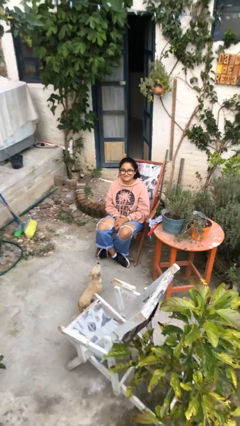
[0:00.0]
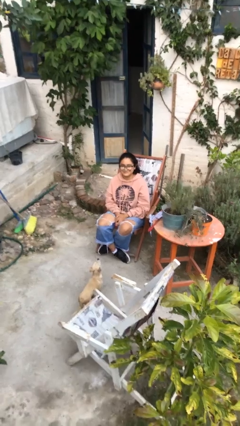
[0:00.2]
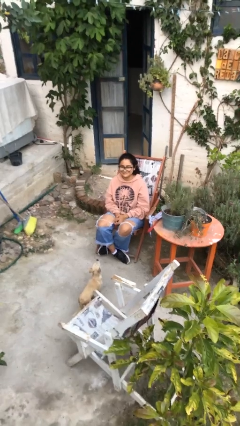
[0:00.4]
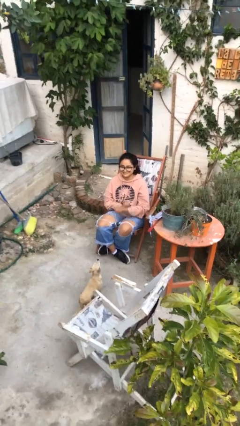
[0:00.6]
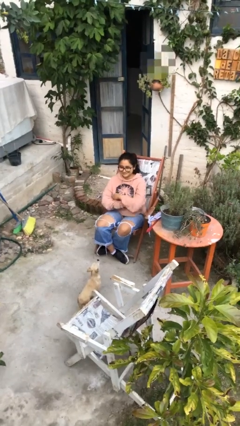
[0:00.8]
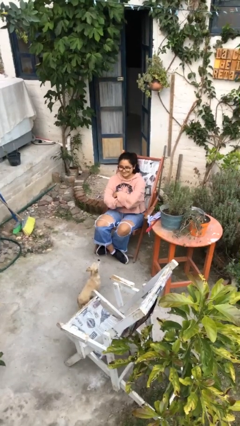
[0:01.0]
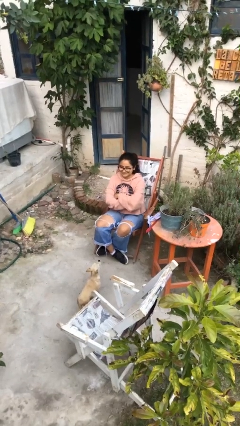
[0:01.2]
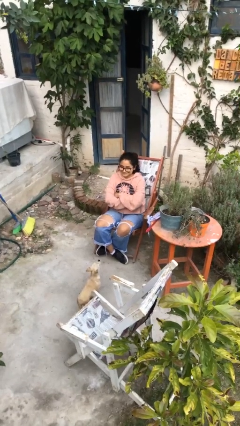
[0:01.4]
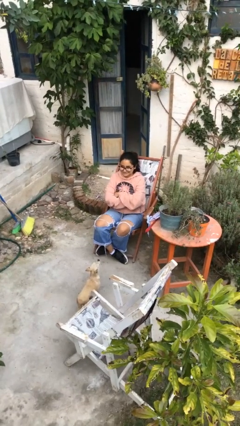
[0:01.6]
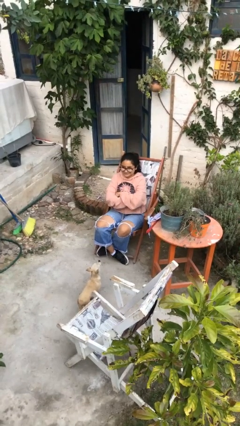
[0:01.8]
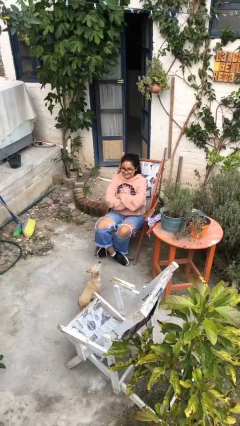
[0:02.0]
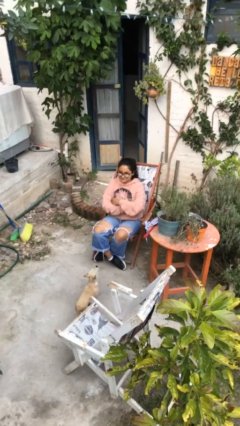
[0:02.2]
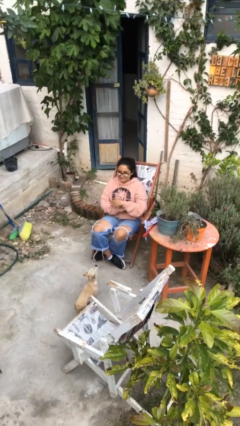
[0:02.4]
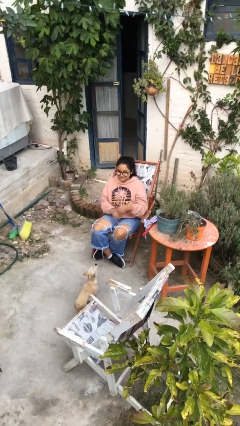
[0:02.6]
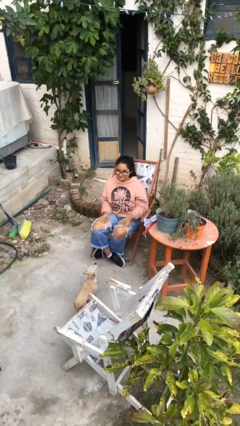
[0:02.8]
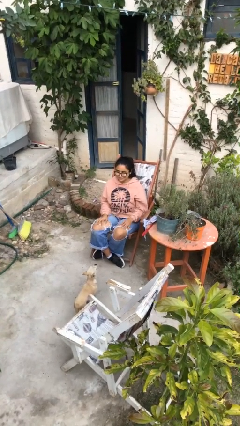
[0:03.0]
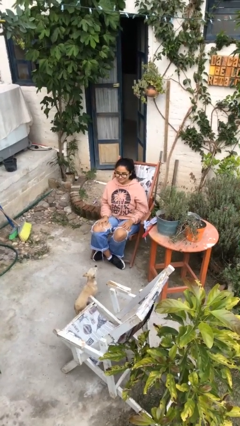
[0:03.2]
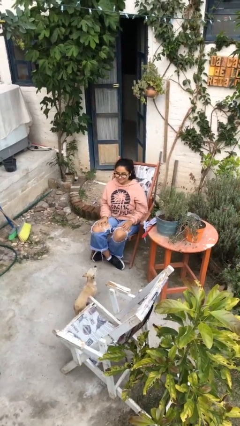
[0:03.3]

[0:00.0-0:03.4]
person crosses arms

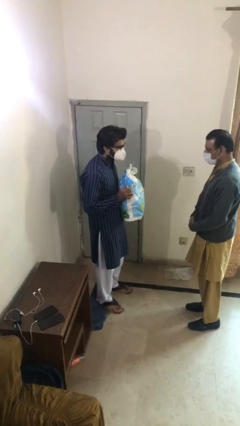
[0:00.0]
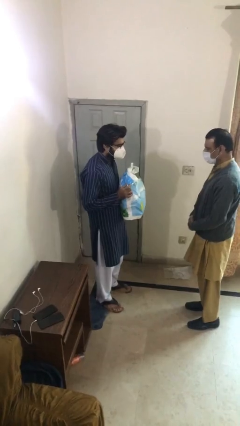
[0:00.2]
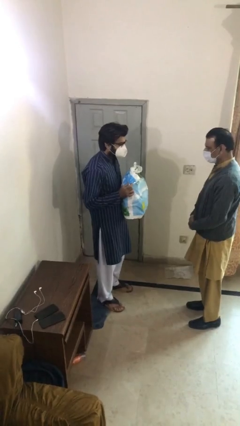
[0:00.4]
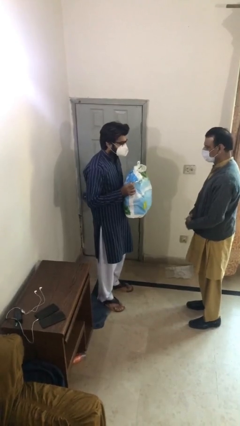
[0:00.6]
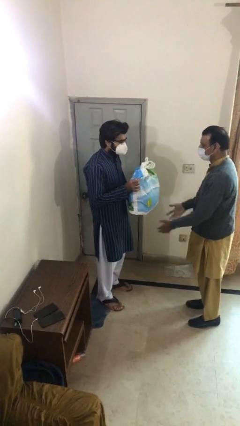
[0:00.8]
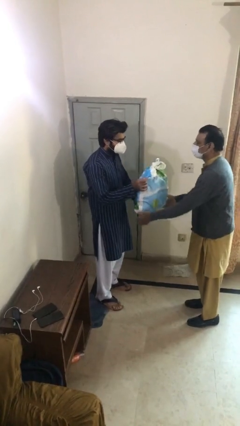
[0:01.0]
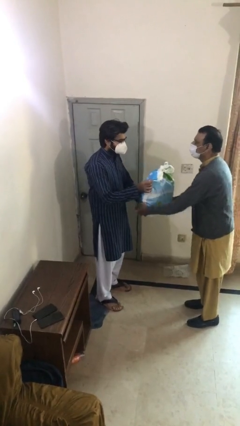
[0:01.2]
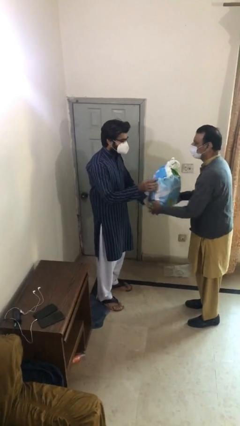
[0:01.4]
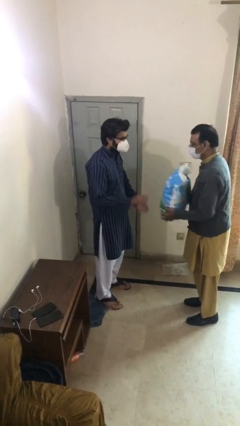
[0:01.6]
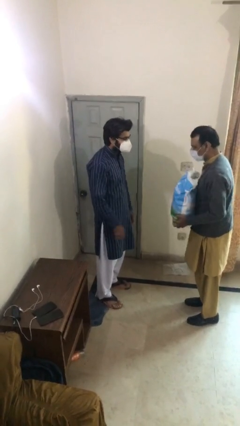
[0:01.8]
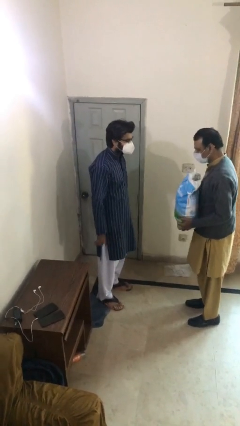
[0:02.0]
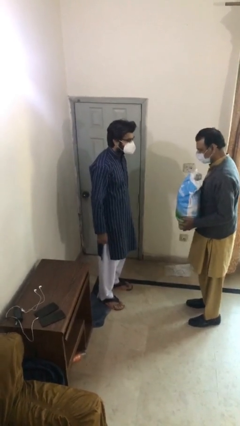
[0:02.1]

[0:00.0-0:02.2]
person transfers object to person

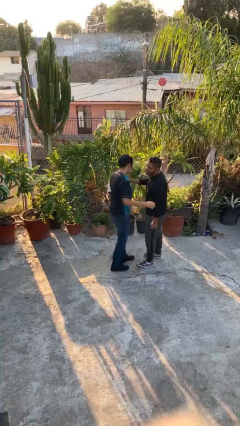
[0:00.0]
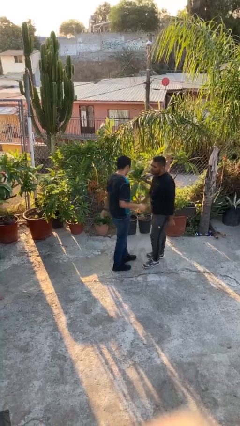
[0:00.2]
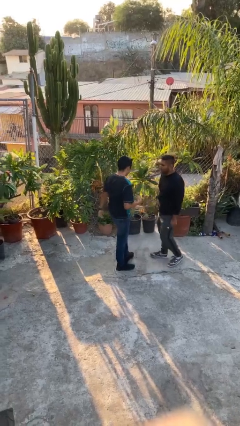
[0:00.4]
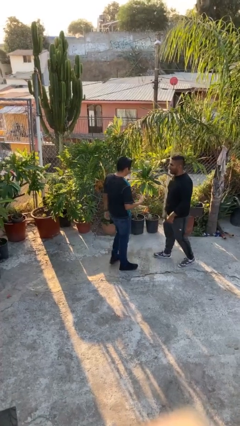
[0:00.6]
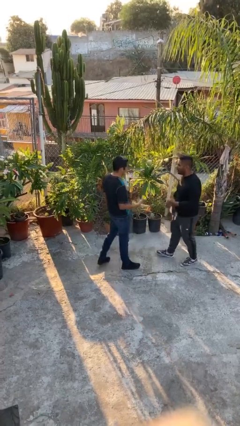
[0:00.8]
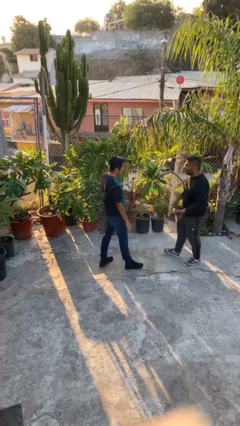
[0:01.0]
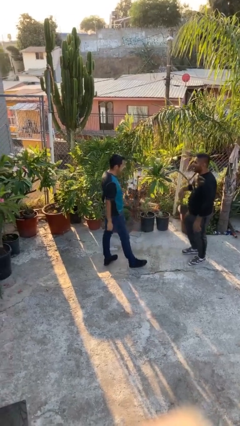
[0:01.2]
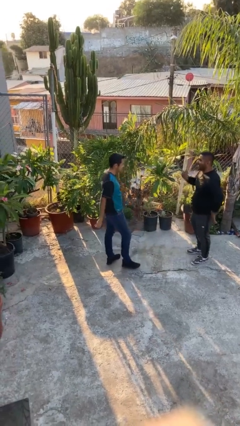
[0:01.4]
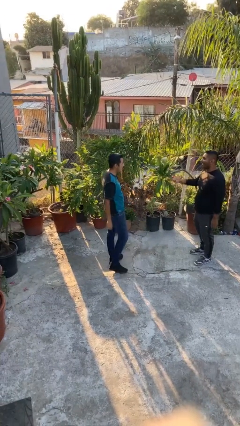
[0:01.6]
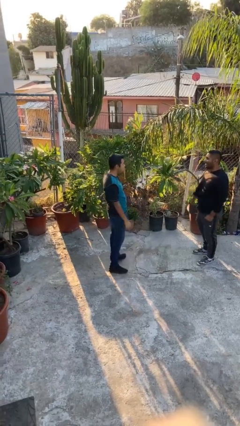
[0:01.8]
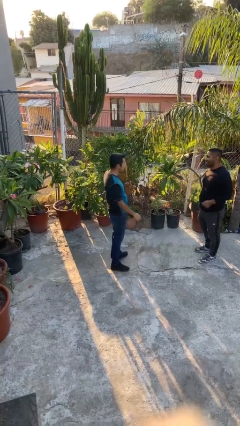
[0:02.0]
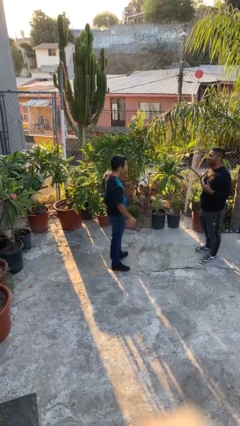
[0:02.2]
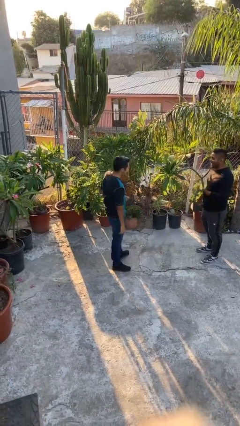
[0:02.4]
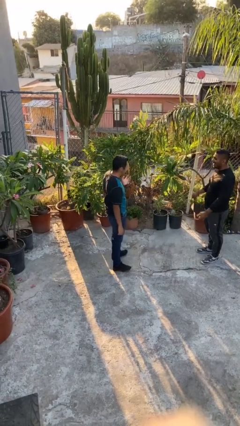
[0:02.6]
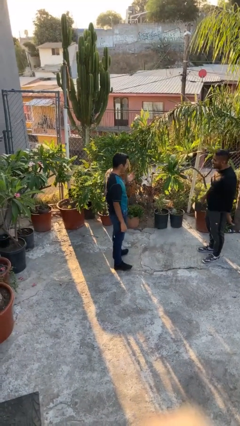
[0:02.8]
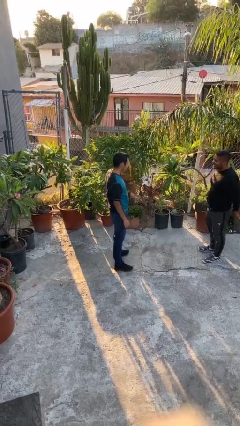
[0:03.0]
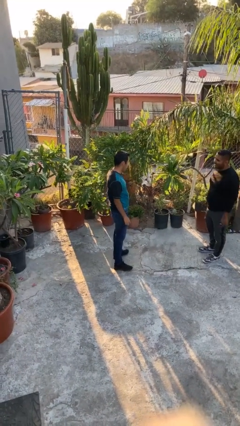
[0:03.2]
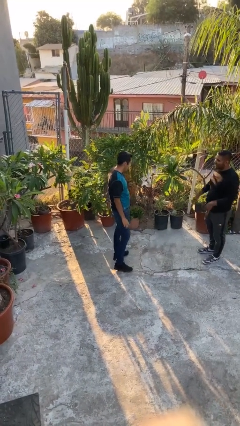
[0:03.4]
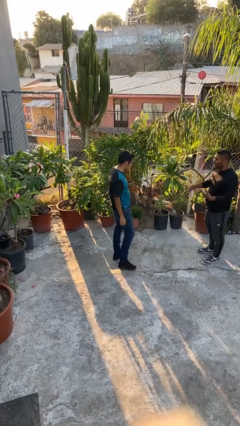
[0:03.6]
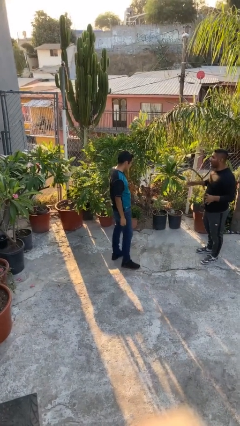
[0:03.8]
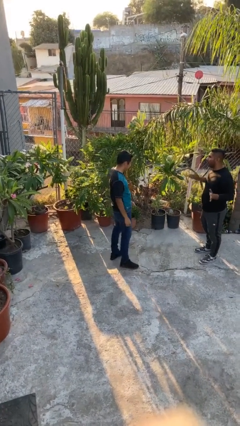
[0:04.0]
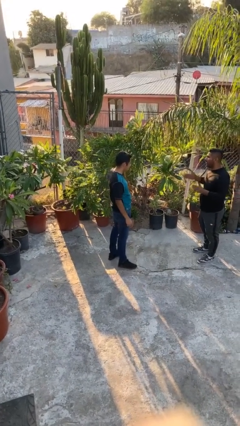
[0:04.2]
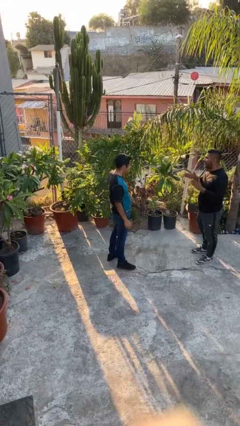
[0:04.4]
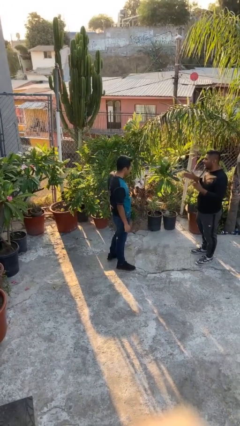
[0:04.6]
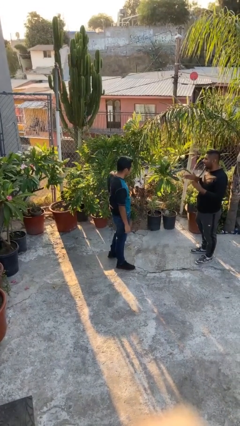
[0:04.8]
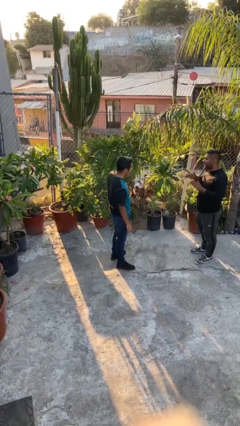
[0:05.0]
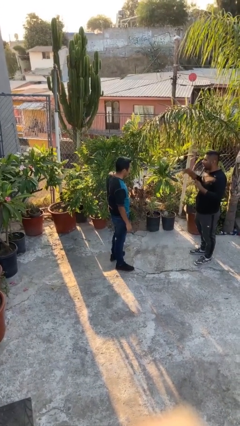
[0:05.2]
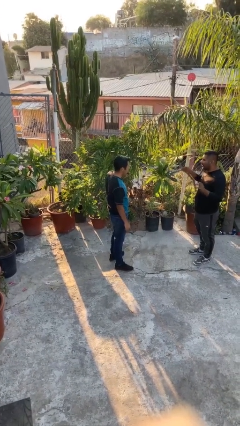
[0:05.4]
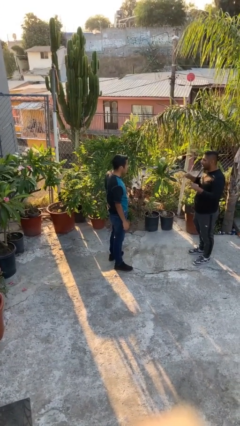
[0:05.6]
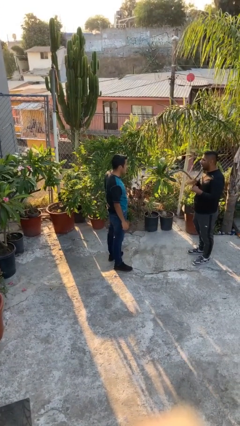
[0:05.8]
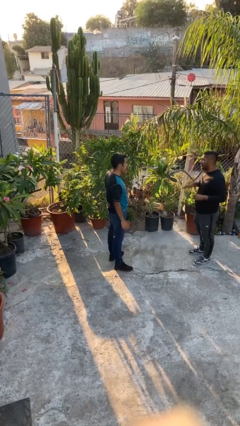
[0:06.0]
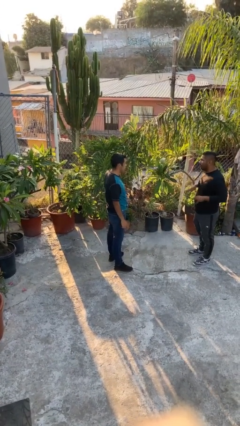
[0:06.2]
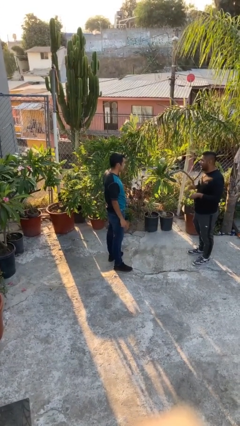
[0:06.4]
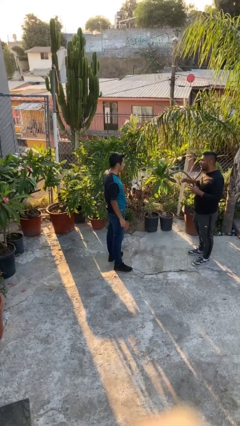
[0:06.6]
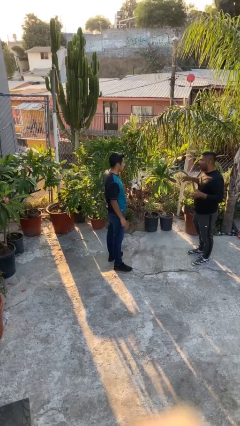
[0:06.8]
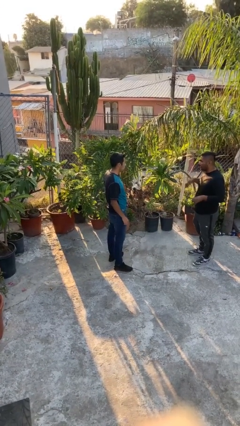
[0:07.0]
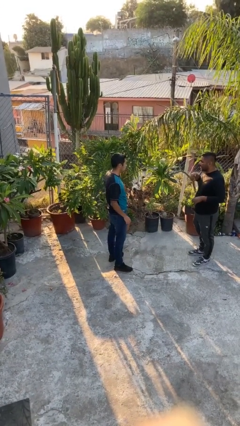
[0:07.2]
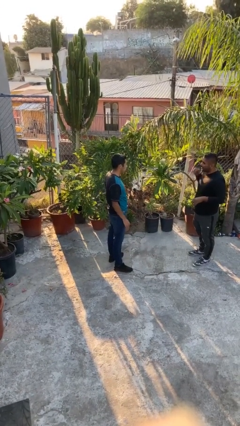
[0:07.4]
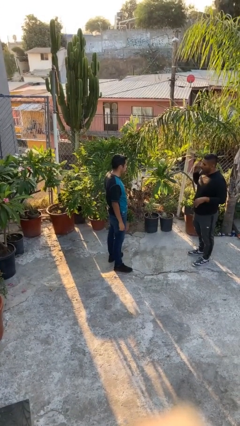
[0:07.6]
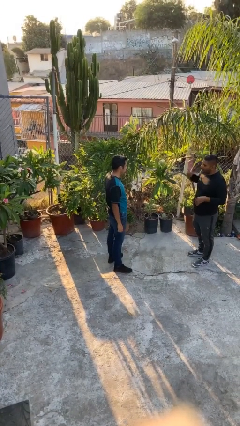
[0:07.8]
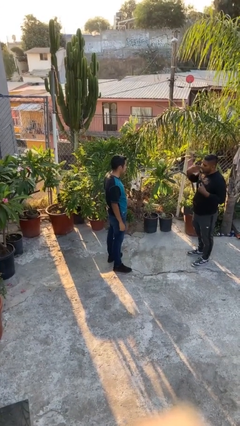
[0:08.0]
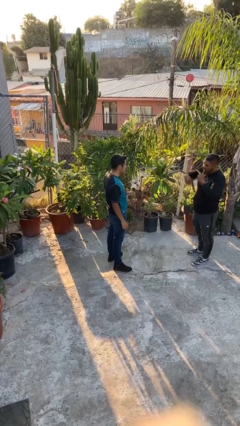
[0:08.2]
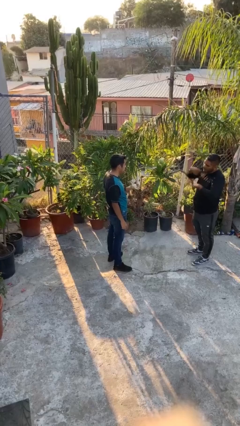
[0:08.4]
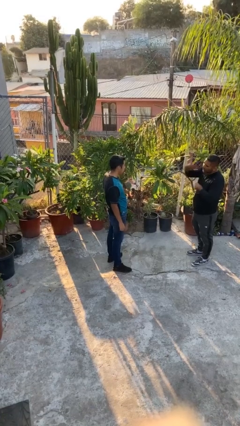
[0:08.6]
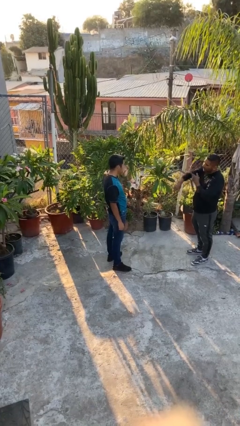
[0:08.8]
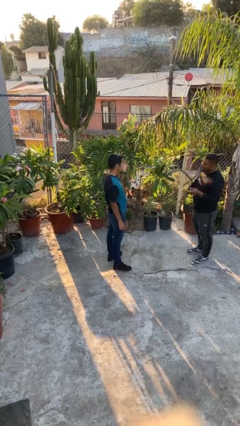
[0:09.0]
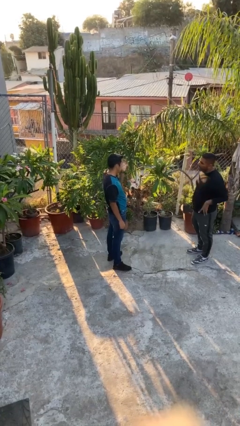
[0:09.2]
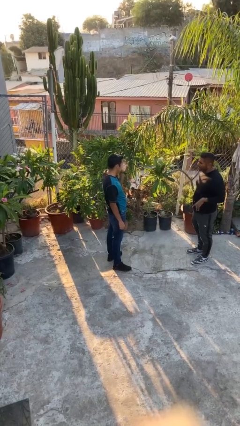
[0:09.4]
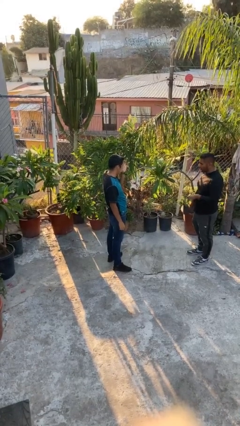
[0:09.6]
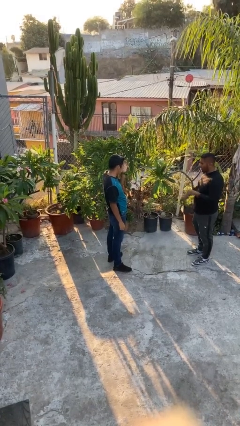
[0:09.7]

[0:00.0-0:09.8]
person talks to person

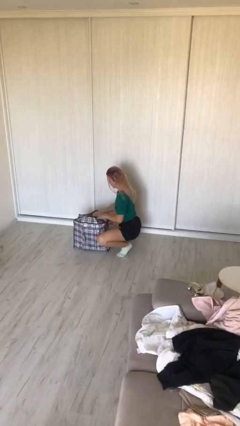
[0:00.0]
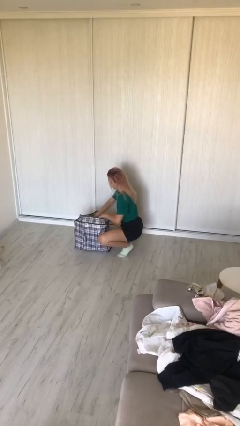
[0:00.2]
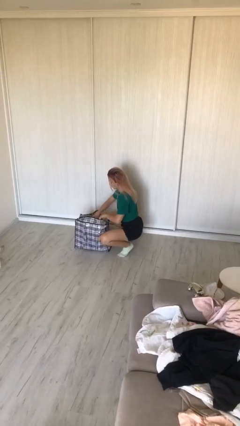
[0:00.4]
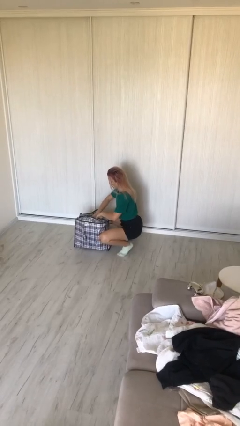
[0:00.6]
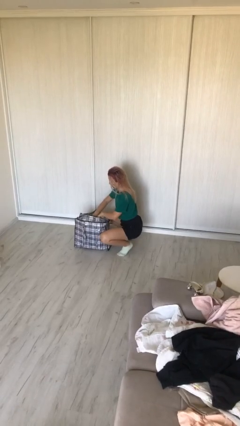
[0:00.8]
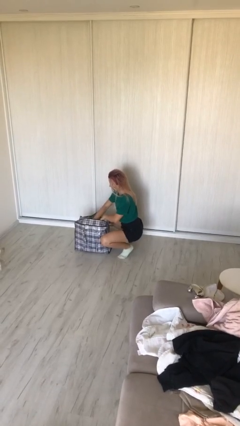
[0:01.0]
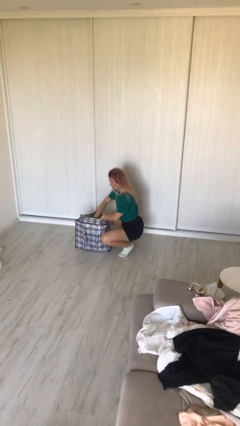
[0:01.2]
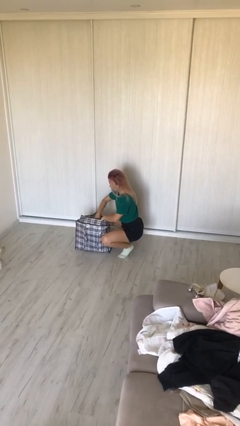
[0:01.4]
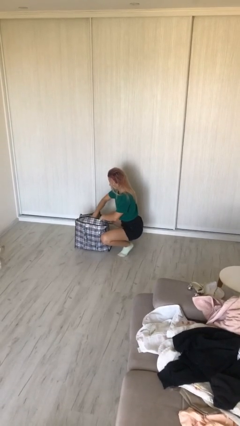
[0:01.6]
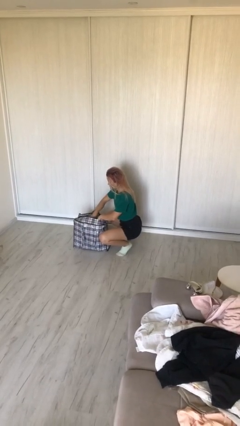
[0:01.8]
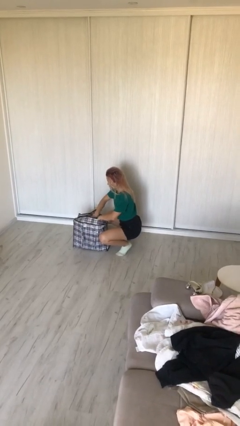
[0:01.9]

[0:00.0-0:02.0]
person searches in bag

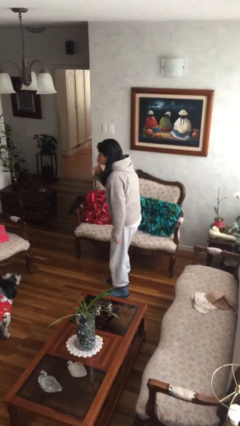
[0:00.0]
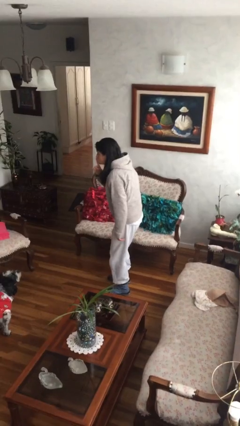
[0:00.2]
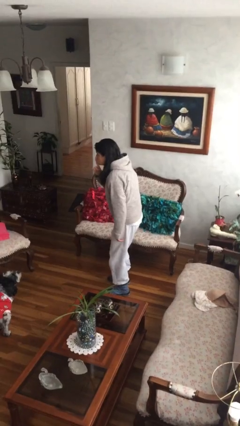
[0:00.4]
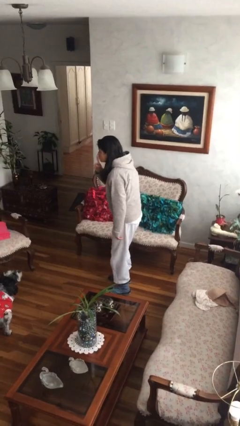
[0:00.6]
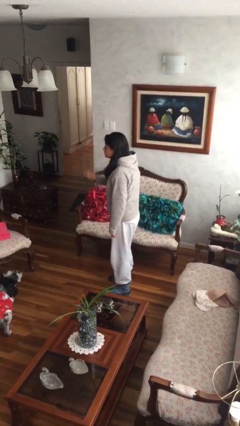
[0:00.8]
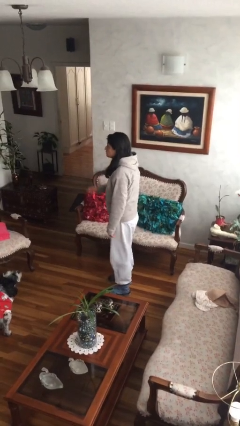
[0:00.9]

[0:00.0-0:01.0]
person gestures be quiet
